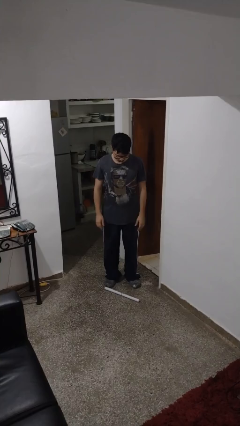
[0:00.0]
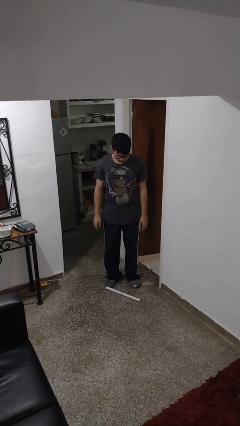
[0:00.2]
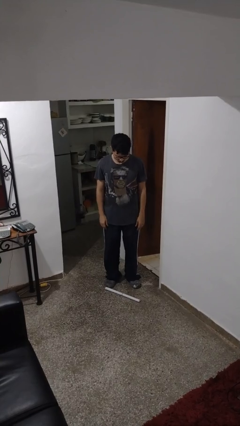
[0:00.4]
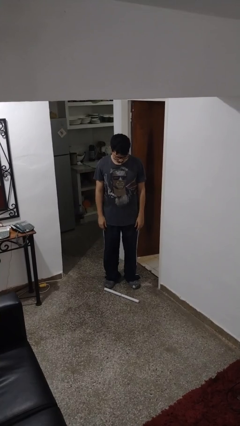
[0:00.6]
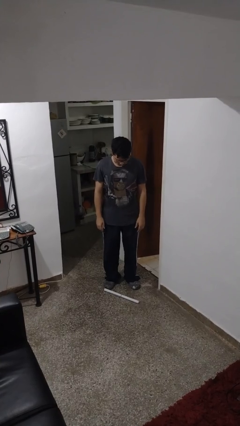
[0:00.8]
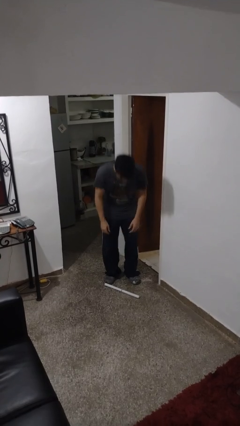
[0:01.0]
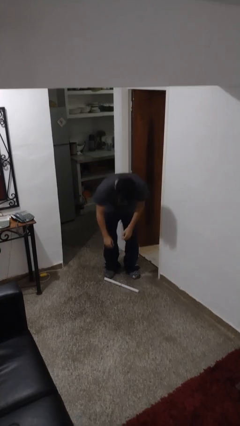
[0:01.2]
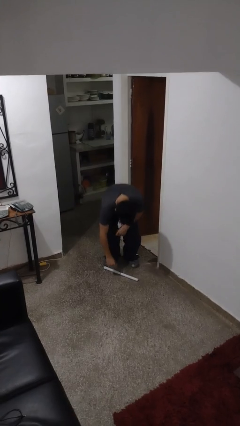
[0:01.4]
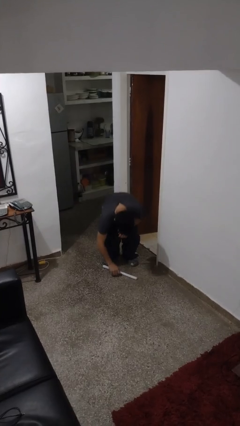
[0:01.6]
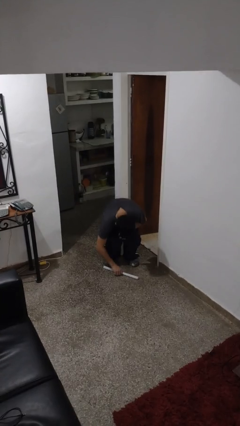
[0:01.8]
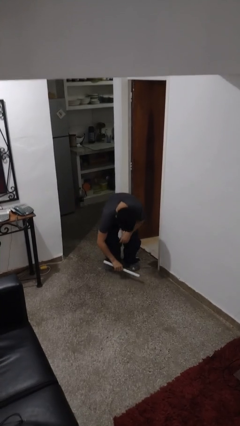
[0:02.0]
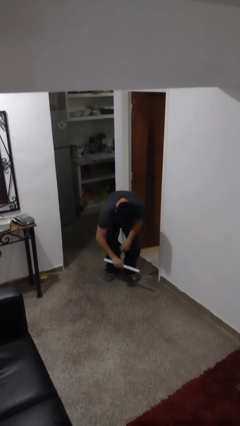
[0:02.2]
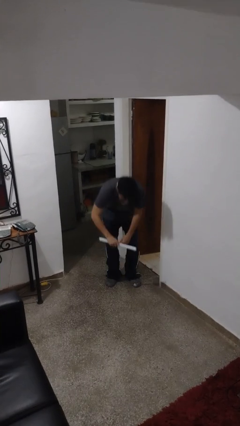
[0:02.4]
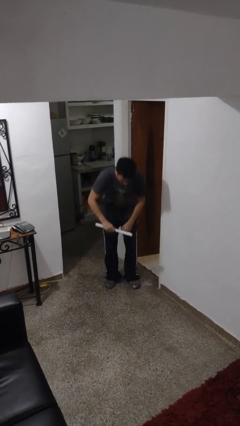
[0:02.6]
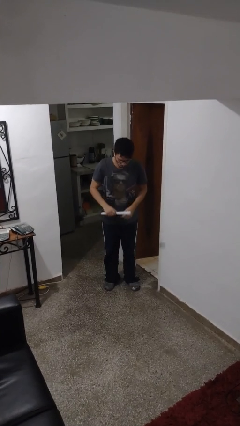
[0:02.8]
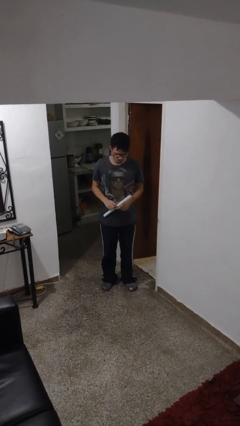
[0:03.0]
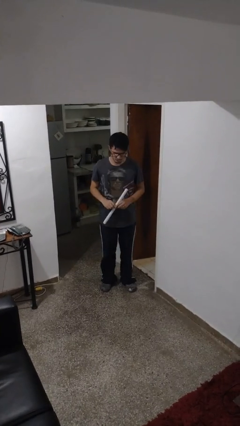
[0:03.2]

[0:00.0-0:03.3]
person picks up object from floor

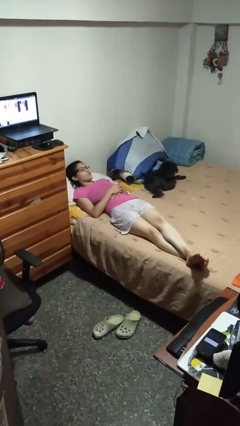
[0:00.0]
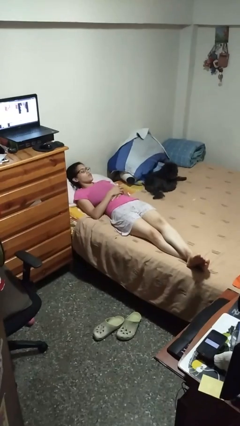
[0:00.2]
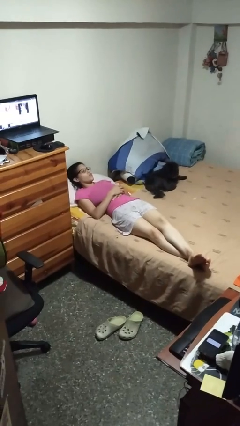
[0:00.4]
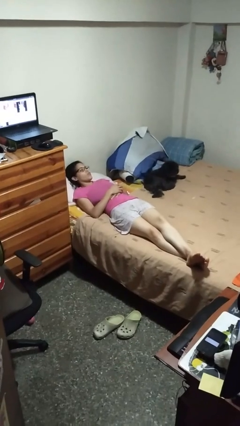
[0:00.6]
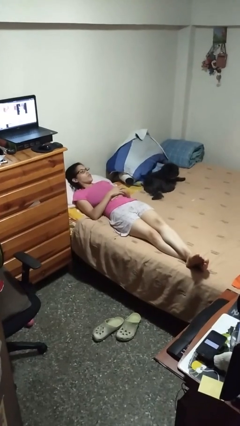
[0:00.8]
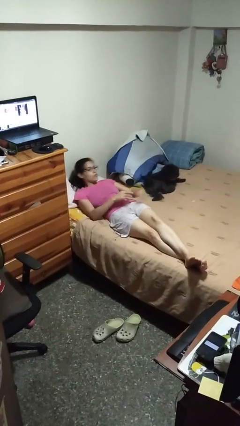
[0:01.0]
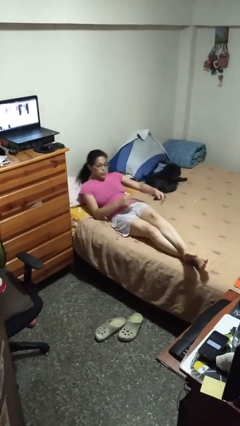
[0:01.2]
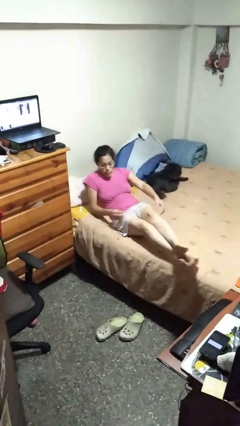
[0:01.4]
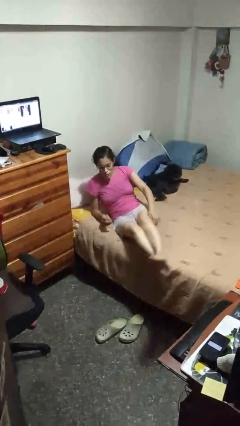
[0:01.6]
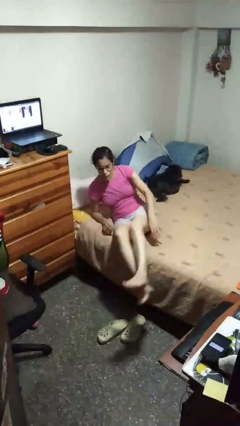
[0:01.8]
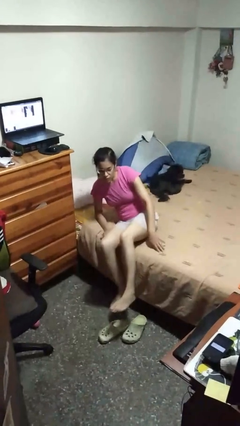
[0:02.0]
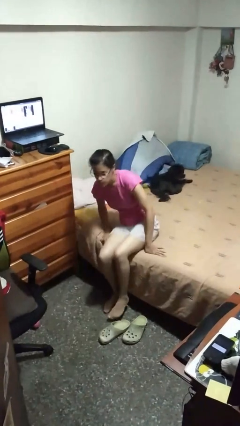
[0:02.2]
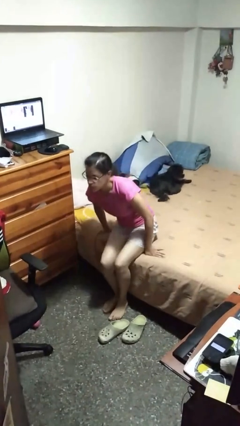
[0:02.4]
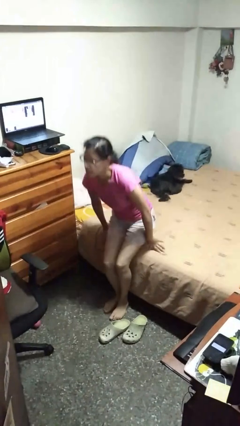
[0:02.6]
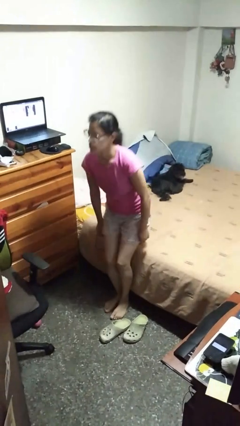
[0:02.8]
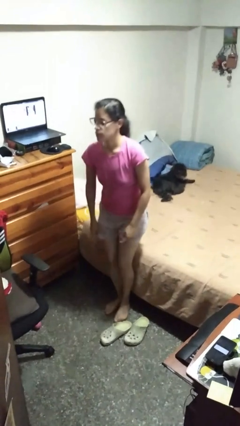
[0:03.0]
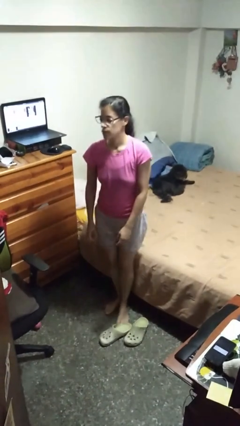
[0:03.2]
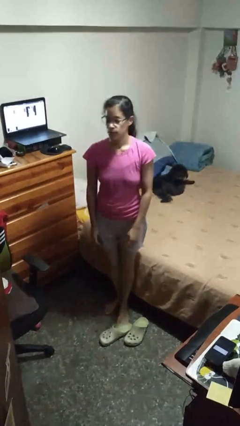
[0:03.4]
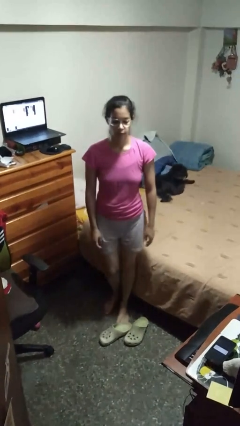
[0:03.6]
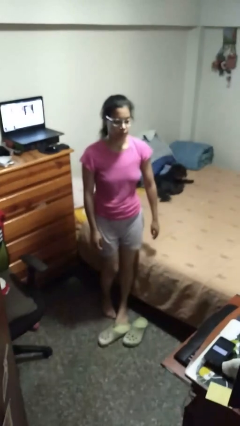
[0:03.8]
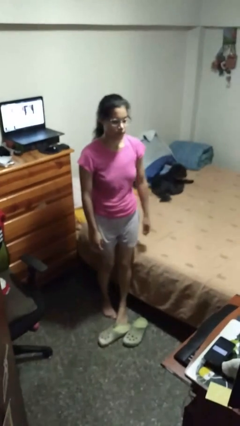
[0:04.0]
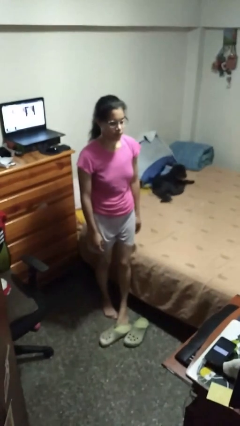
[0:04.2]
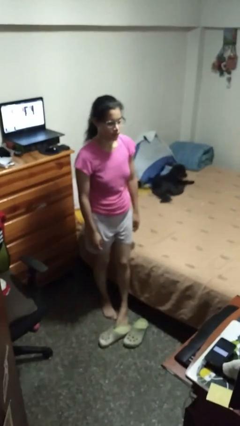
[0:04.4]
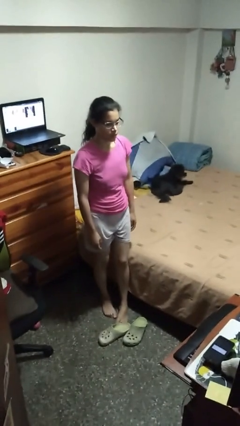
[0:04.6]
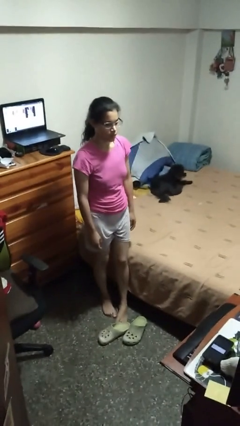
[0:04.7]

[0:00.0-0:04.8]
person stands up

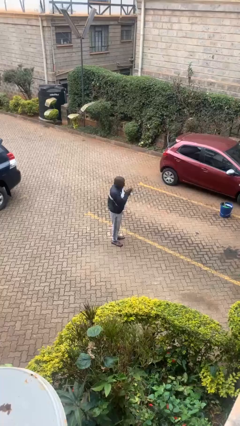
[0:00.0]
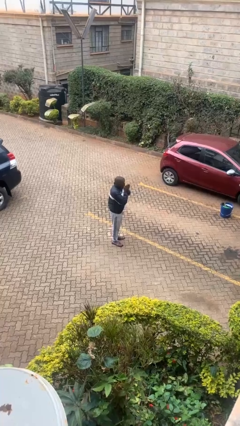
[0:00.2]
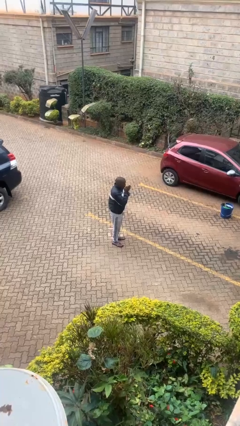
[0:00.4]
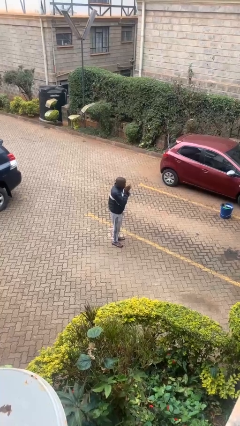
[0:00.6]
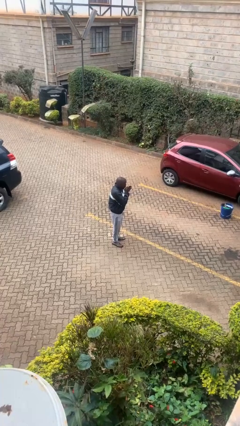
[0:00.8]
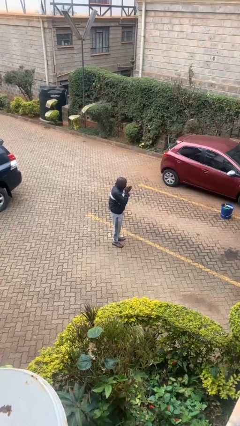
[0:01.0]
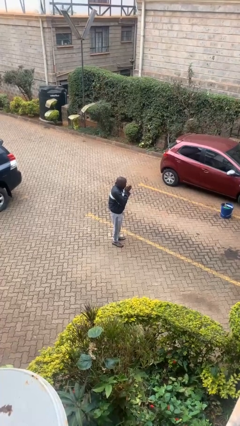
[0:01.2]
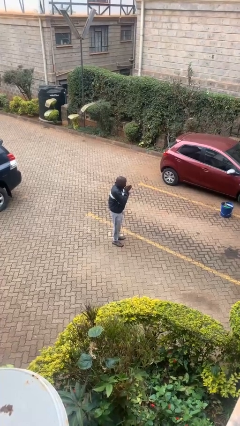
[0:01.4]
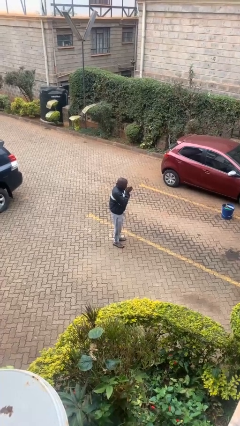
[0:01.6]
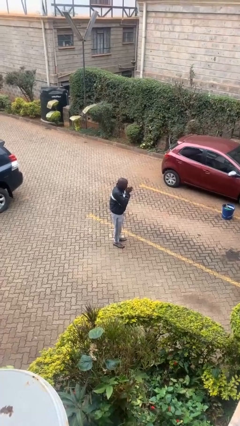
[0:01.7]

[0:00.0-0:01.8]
person blows into hands

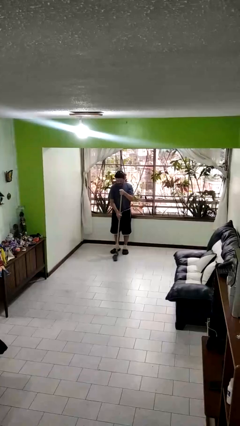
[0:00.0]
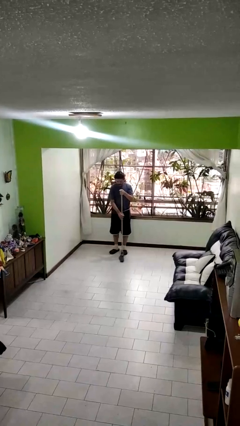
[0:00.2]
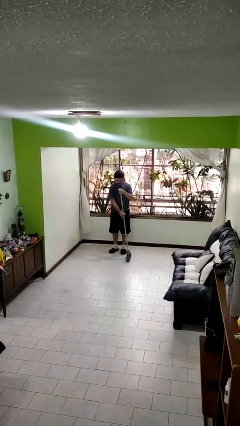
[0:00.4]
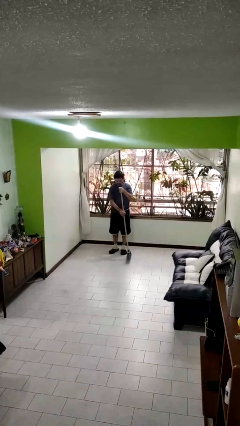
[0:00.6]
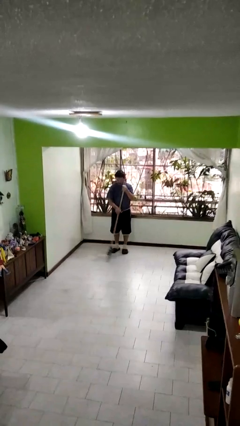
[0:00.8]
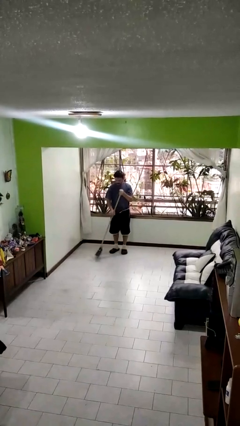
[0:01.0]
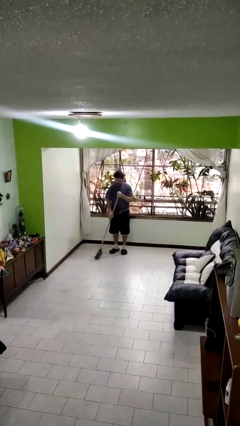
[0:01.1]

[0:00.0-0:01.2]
person sweeps floor

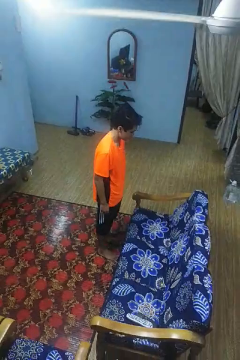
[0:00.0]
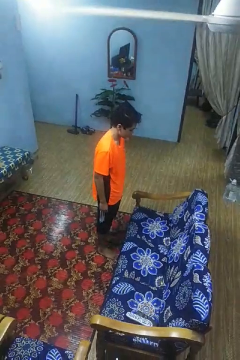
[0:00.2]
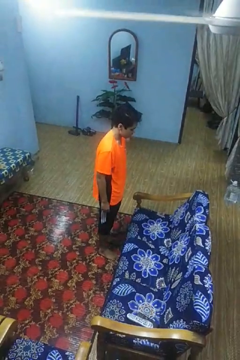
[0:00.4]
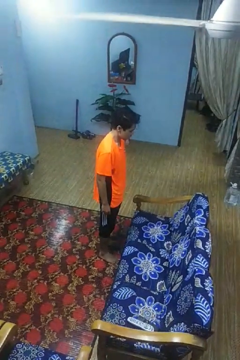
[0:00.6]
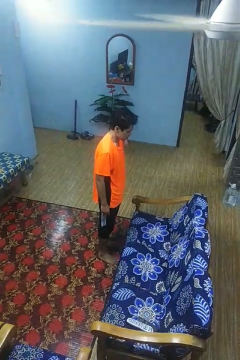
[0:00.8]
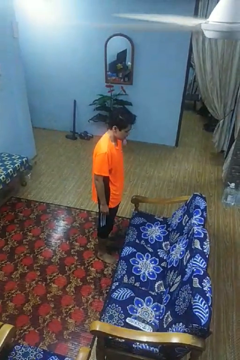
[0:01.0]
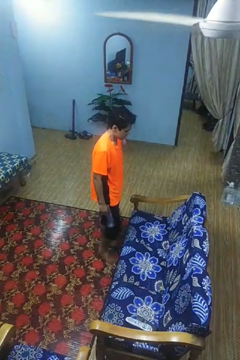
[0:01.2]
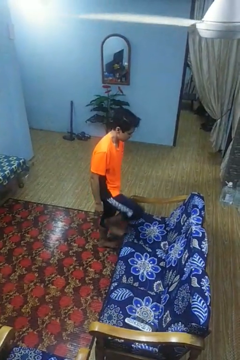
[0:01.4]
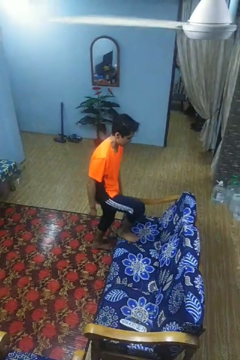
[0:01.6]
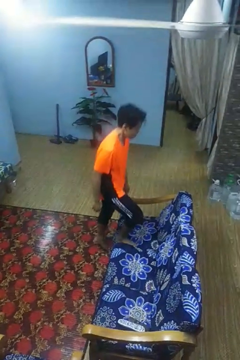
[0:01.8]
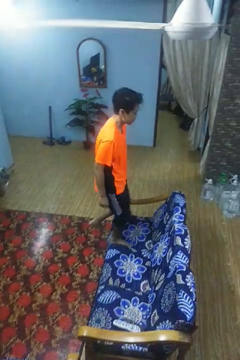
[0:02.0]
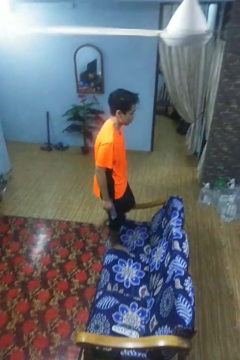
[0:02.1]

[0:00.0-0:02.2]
person climbs on couch

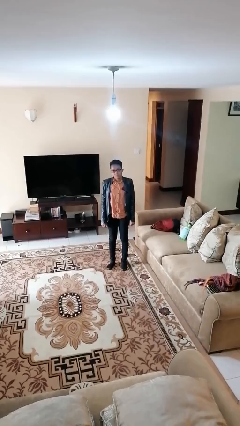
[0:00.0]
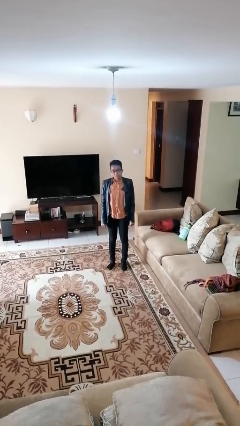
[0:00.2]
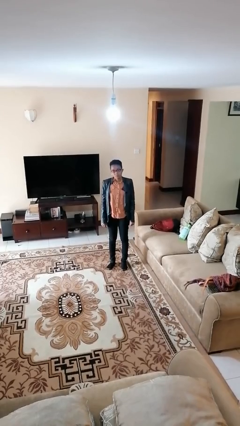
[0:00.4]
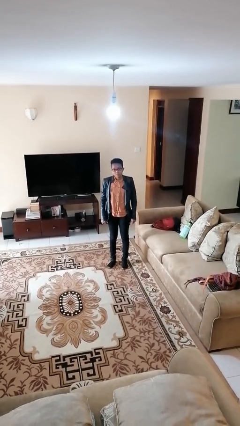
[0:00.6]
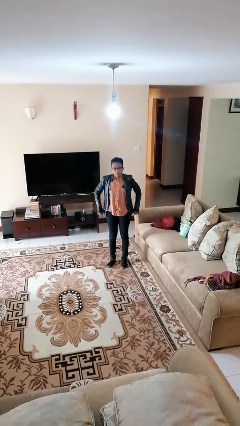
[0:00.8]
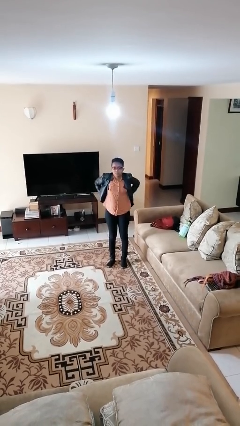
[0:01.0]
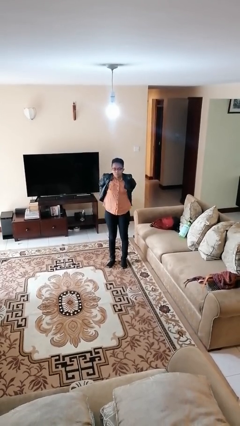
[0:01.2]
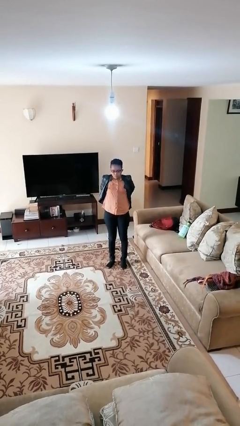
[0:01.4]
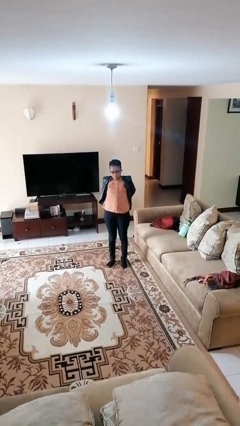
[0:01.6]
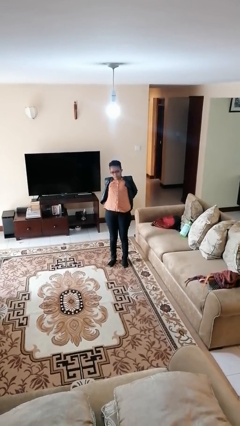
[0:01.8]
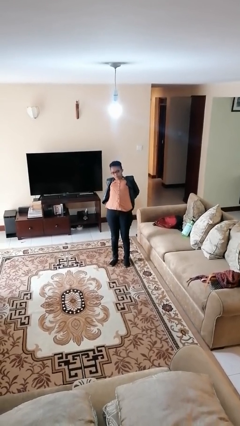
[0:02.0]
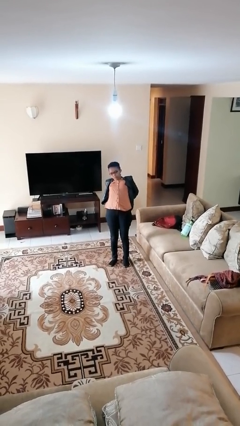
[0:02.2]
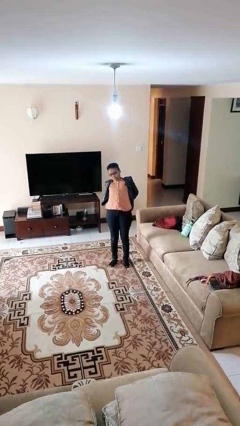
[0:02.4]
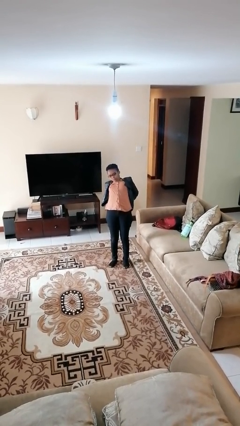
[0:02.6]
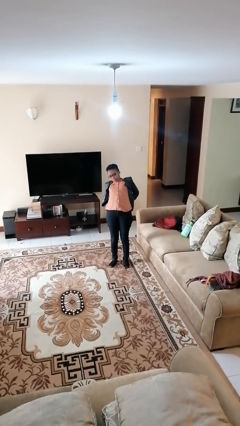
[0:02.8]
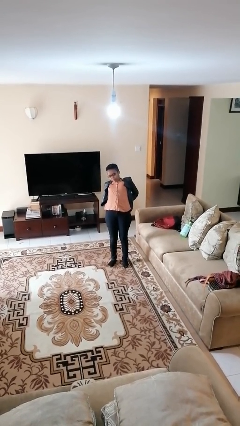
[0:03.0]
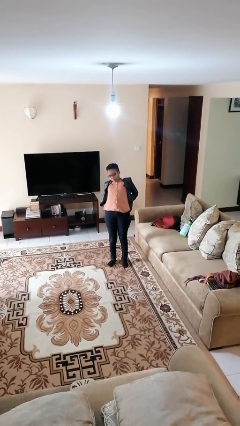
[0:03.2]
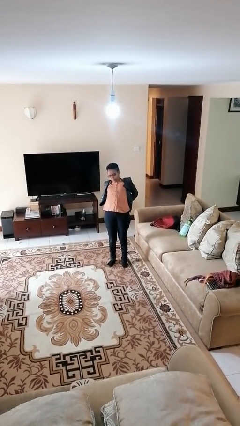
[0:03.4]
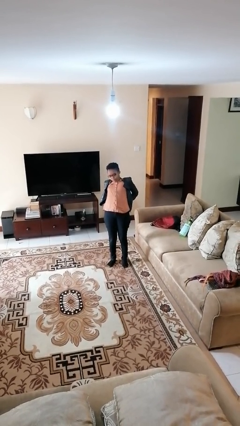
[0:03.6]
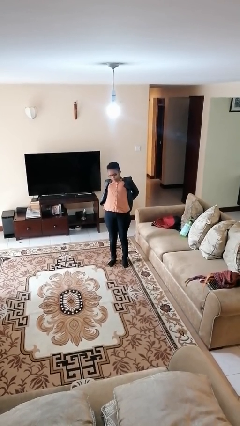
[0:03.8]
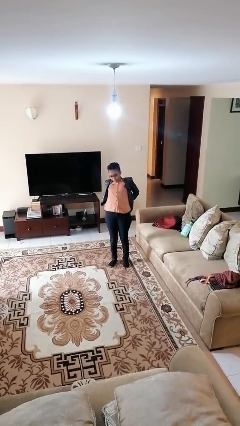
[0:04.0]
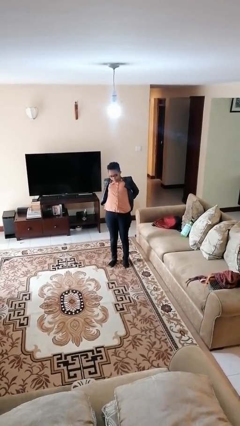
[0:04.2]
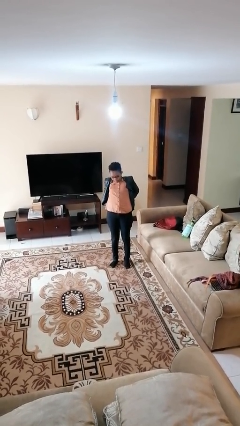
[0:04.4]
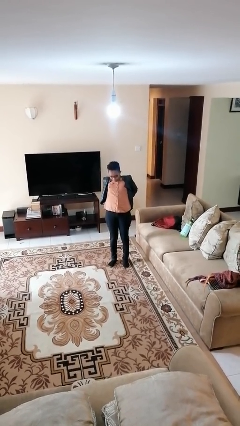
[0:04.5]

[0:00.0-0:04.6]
person stretches back

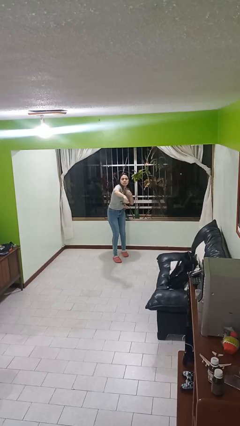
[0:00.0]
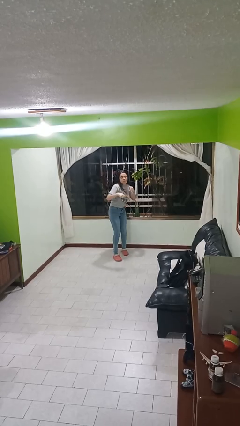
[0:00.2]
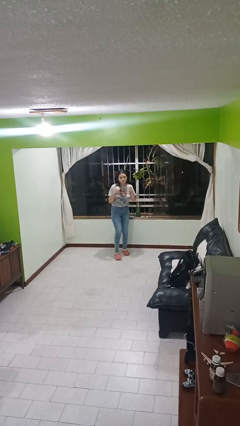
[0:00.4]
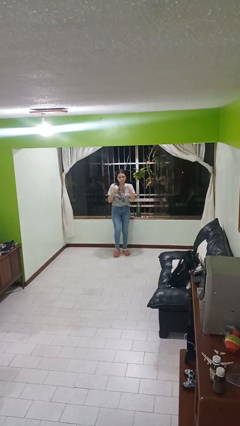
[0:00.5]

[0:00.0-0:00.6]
person punches
